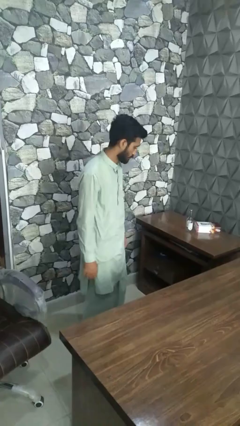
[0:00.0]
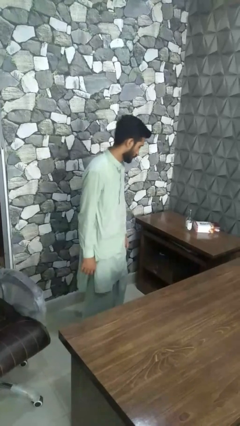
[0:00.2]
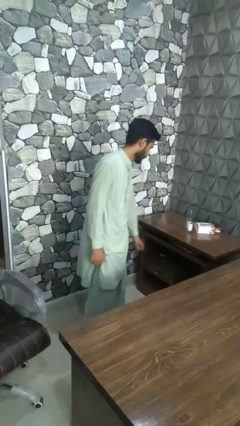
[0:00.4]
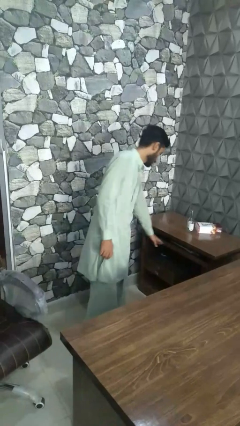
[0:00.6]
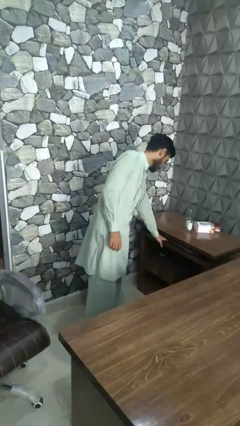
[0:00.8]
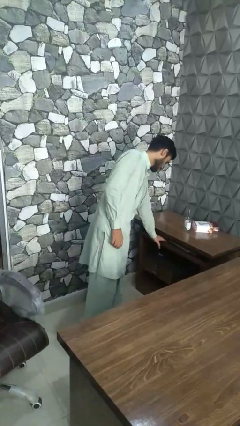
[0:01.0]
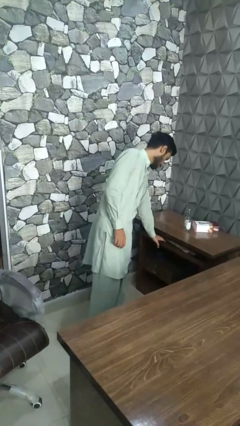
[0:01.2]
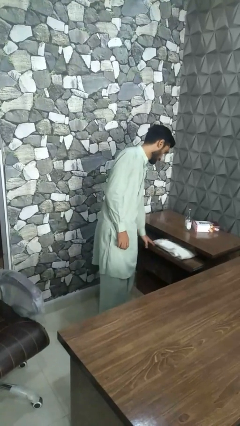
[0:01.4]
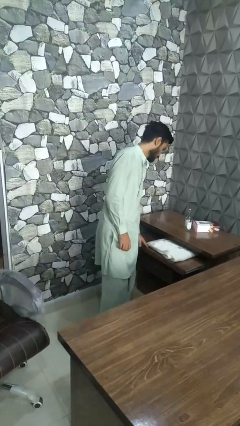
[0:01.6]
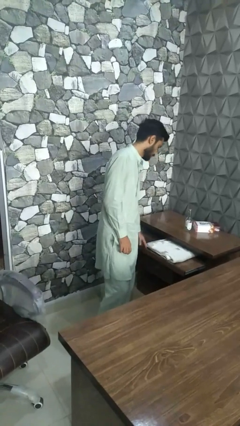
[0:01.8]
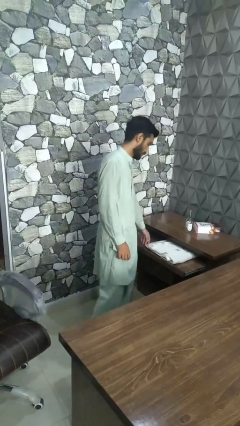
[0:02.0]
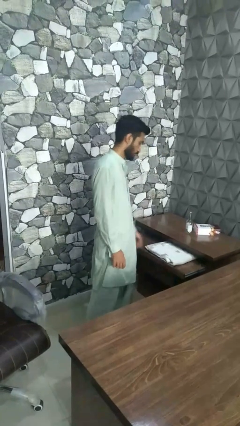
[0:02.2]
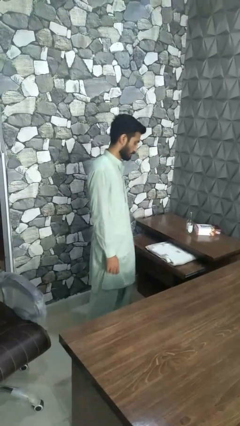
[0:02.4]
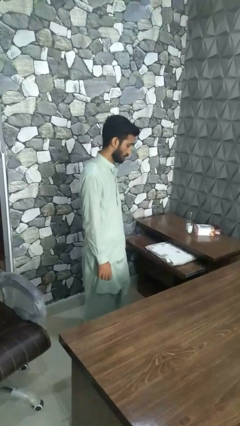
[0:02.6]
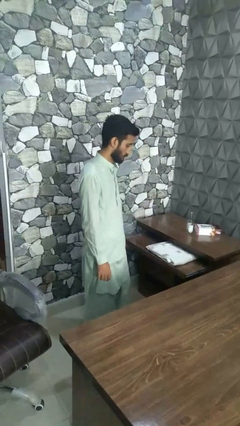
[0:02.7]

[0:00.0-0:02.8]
person opens dresser drawer

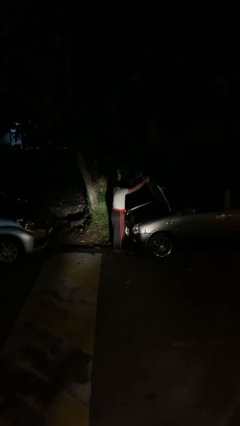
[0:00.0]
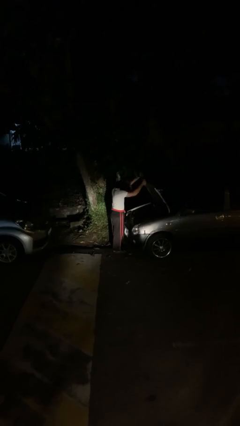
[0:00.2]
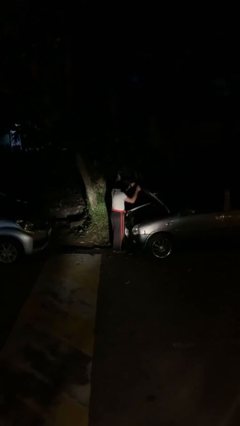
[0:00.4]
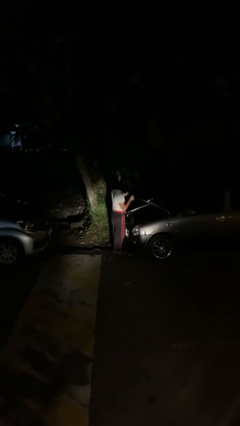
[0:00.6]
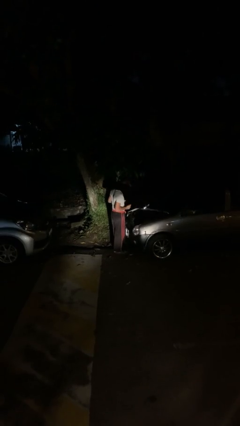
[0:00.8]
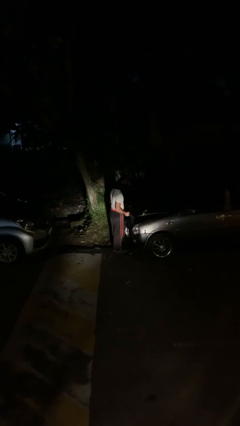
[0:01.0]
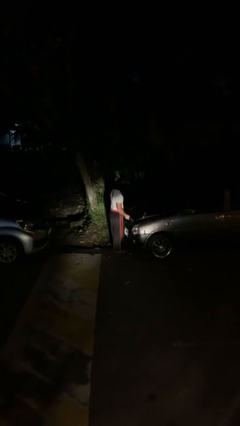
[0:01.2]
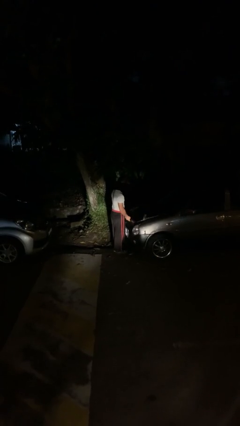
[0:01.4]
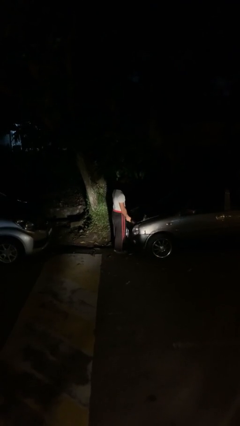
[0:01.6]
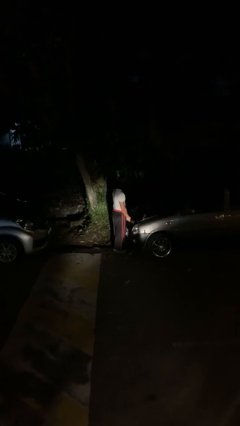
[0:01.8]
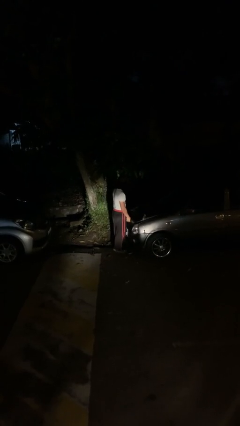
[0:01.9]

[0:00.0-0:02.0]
person closes car hood

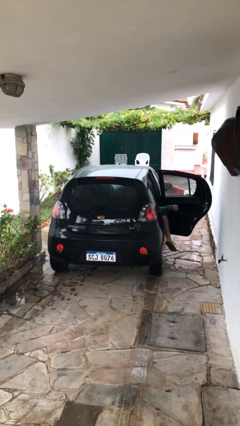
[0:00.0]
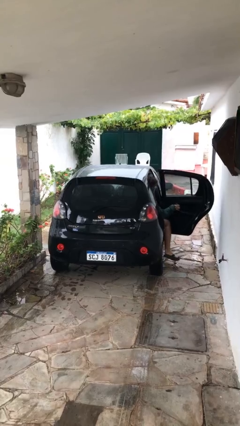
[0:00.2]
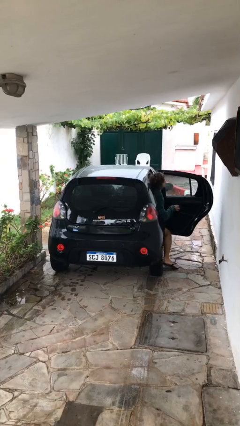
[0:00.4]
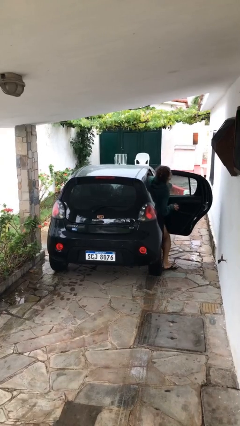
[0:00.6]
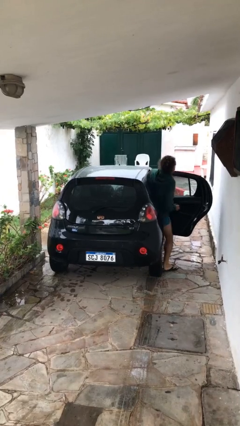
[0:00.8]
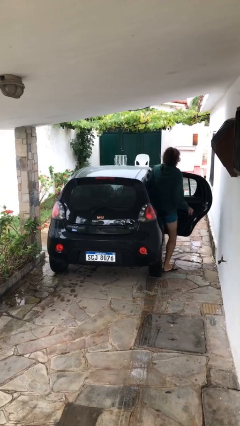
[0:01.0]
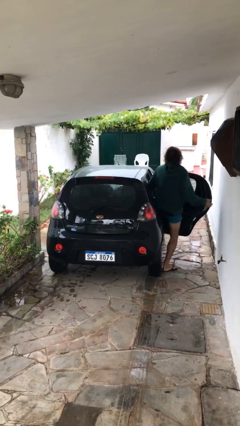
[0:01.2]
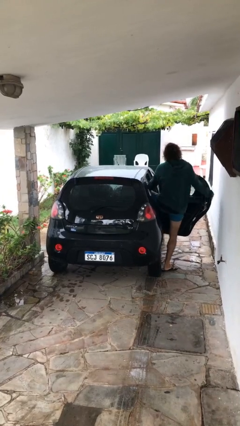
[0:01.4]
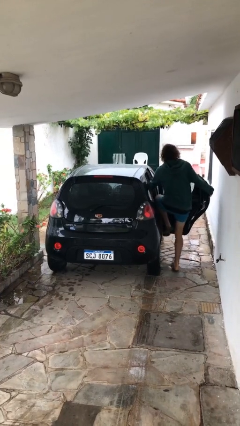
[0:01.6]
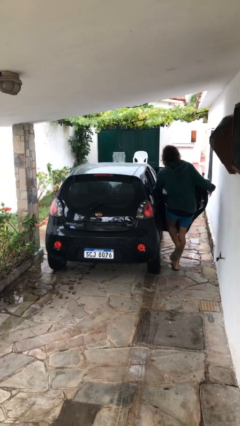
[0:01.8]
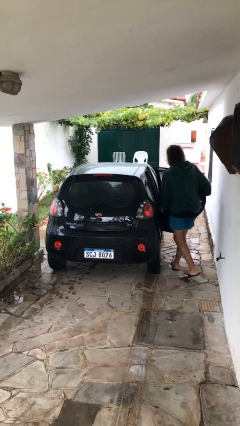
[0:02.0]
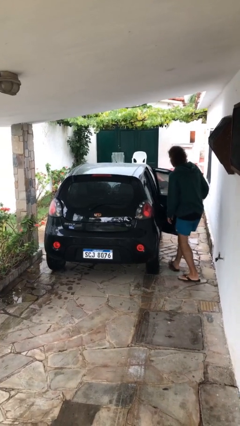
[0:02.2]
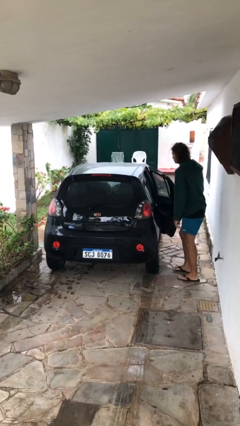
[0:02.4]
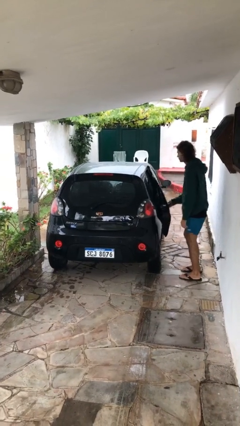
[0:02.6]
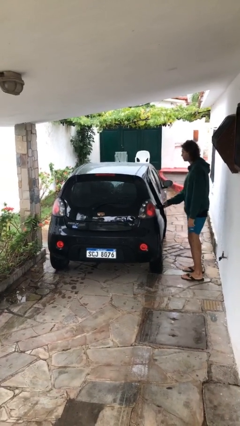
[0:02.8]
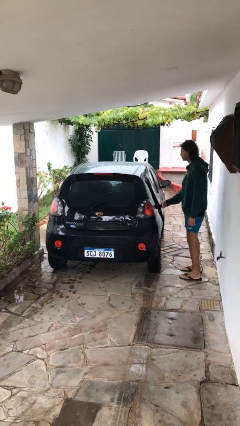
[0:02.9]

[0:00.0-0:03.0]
car drops off person

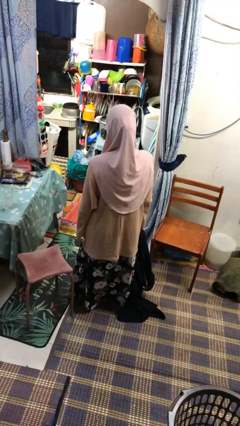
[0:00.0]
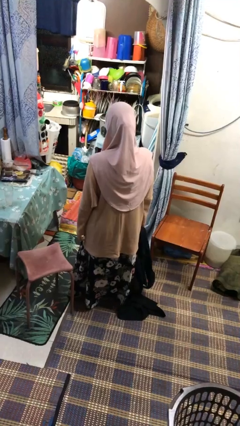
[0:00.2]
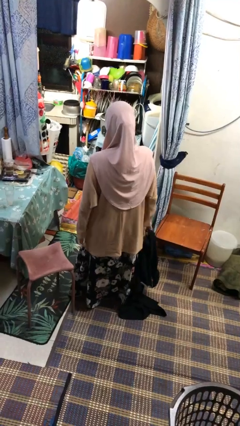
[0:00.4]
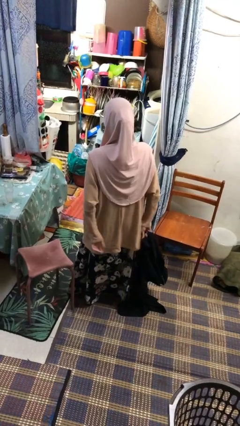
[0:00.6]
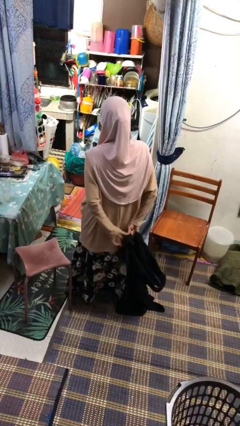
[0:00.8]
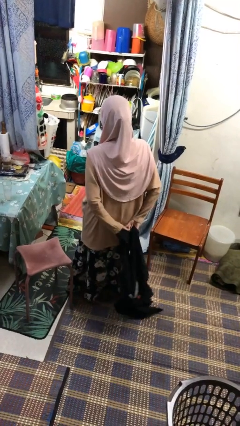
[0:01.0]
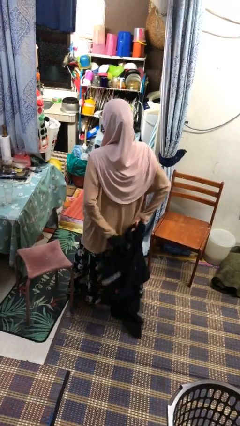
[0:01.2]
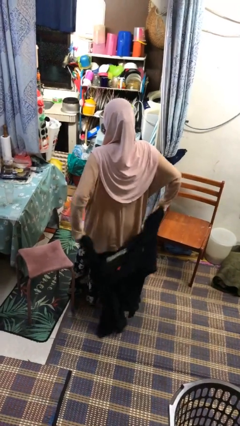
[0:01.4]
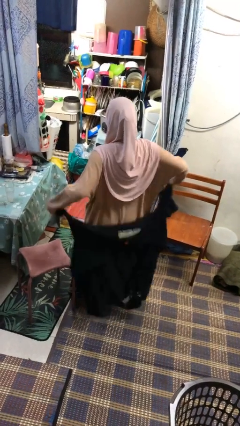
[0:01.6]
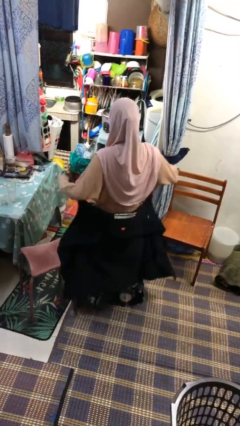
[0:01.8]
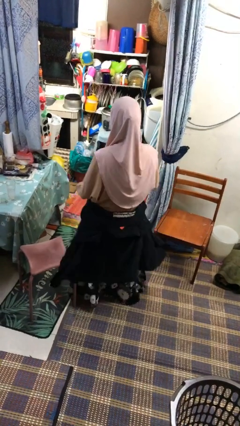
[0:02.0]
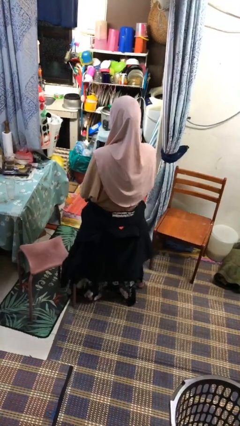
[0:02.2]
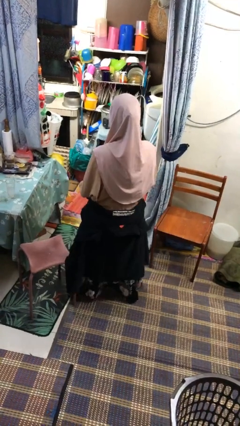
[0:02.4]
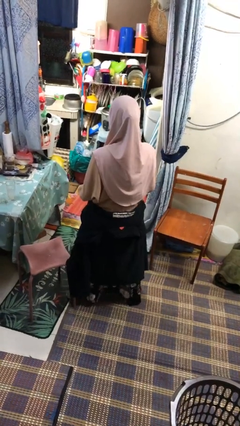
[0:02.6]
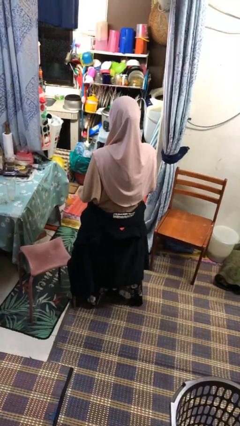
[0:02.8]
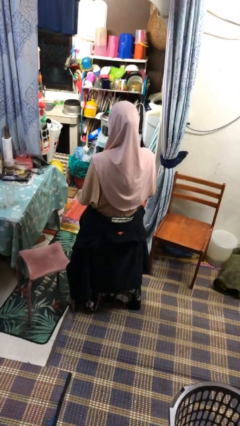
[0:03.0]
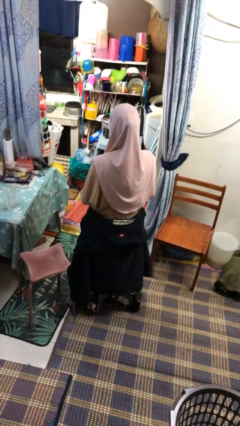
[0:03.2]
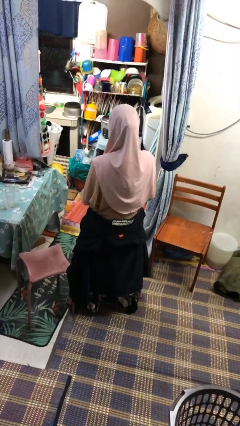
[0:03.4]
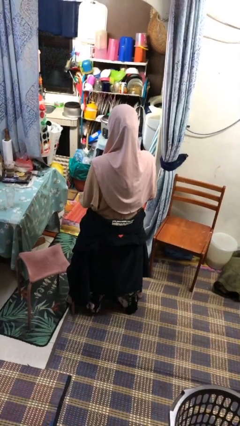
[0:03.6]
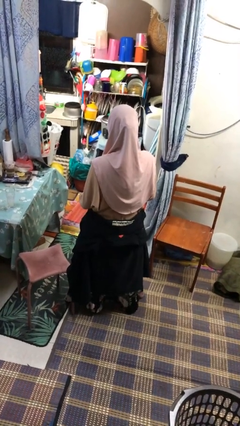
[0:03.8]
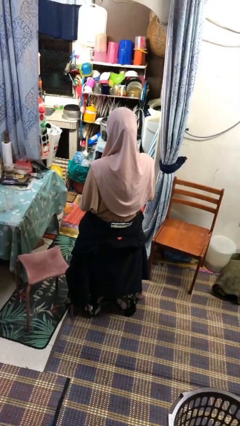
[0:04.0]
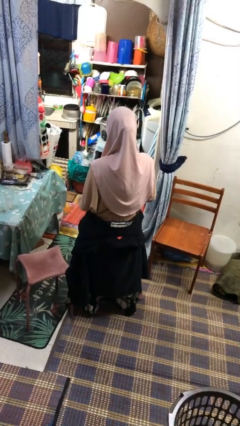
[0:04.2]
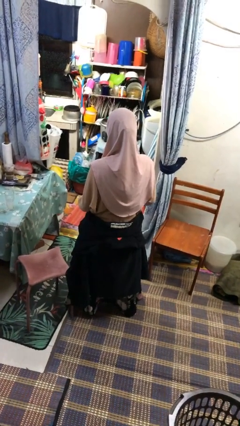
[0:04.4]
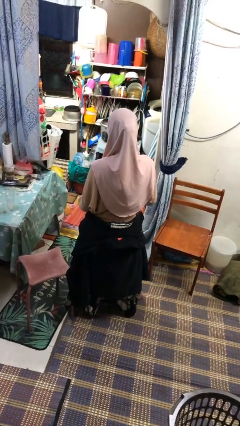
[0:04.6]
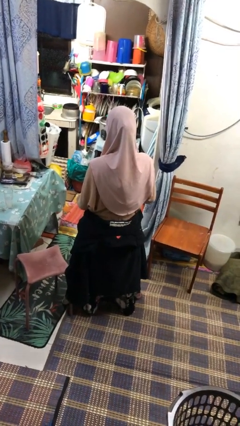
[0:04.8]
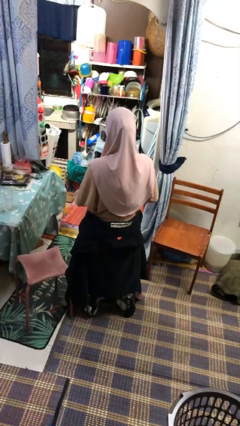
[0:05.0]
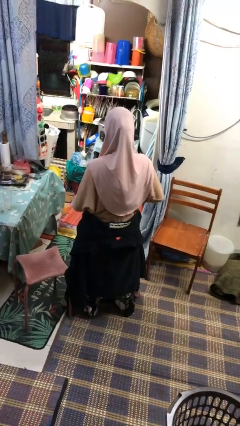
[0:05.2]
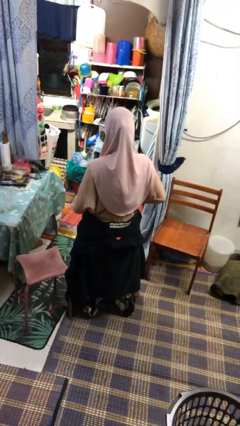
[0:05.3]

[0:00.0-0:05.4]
person ties jacket around waist

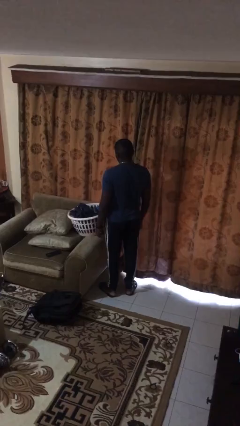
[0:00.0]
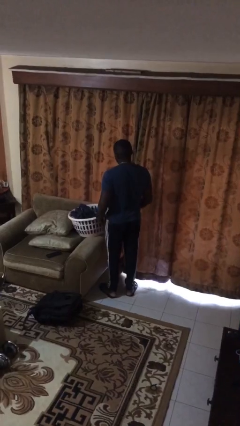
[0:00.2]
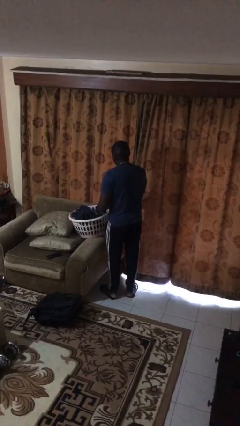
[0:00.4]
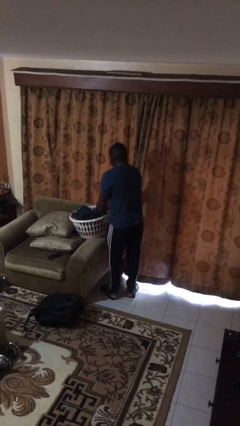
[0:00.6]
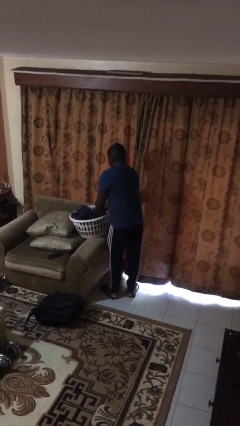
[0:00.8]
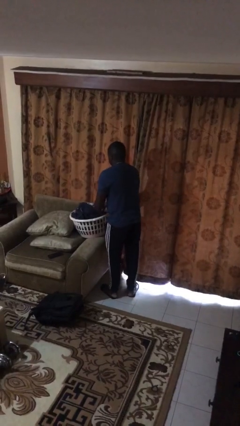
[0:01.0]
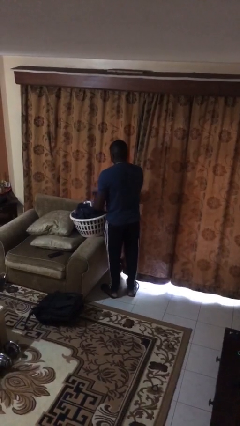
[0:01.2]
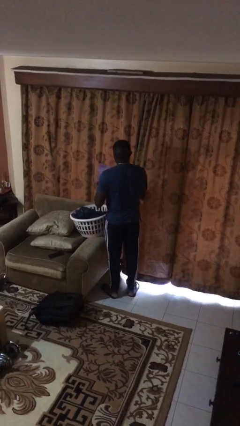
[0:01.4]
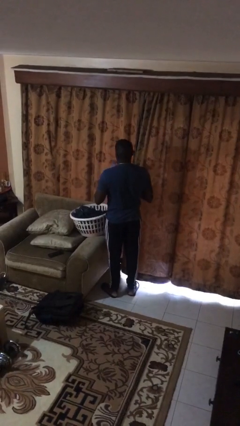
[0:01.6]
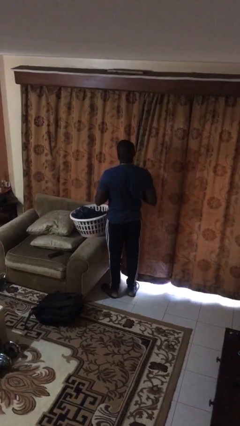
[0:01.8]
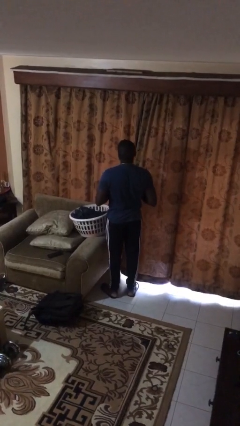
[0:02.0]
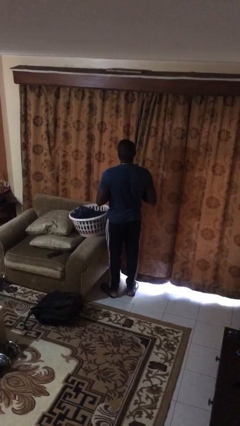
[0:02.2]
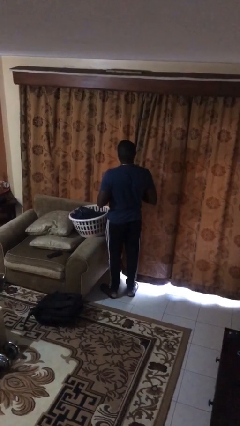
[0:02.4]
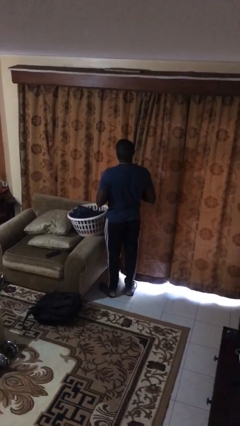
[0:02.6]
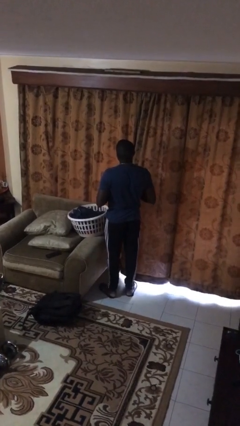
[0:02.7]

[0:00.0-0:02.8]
person takes object from basket

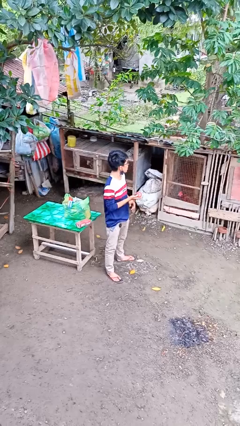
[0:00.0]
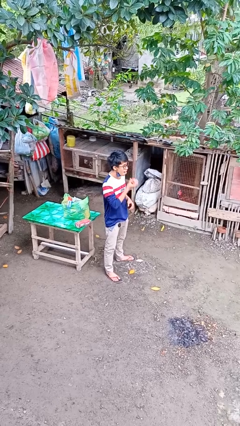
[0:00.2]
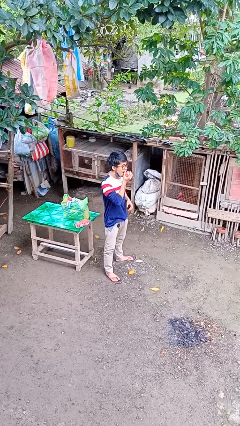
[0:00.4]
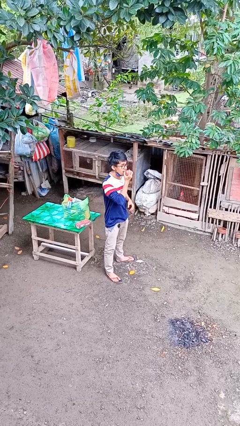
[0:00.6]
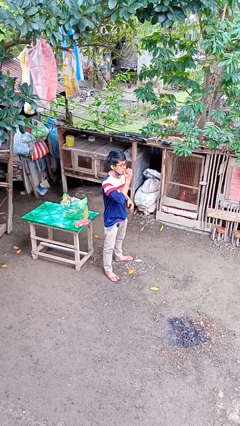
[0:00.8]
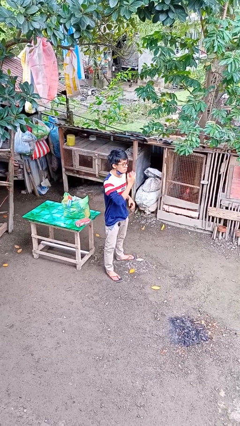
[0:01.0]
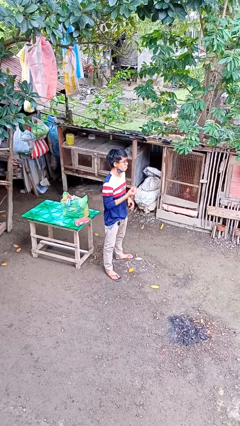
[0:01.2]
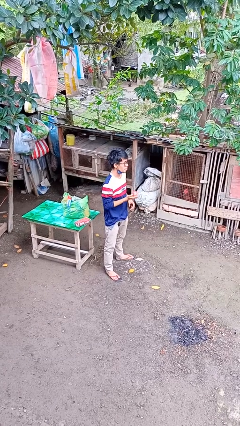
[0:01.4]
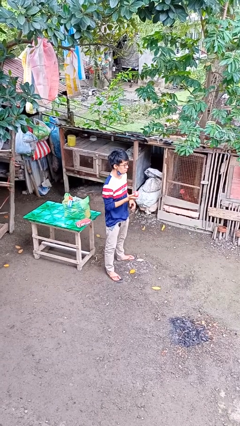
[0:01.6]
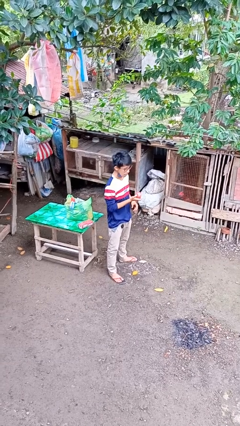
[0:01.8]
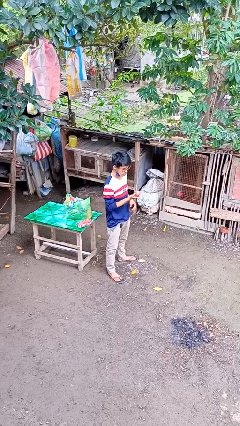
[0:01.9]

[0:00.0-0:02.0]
person eats apple
